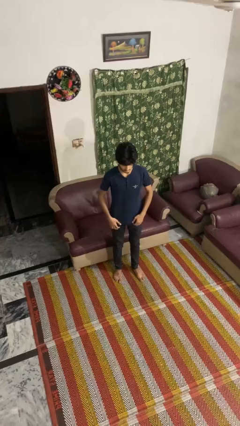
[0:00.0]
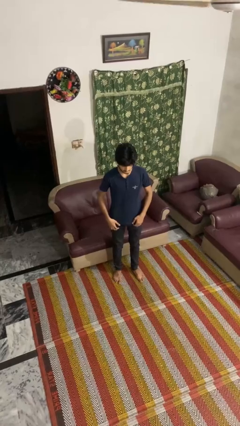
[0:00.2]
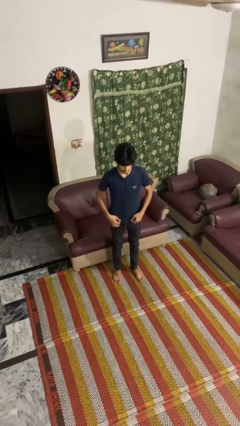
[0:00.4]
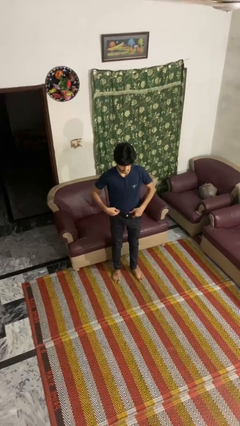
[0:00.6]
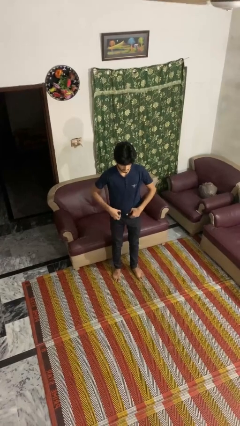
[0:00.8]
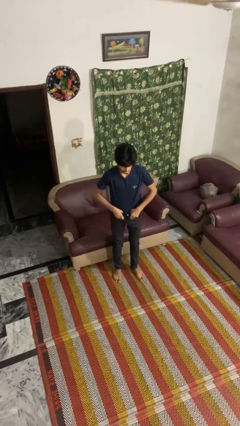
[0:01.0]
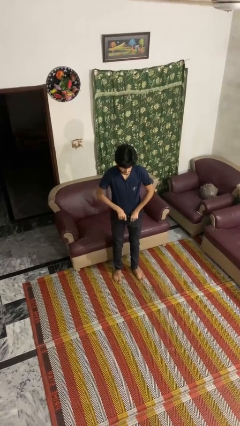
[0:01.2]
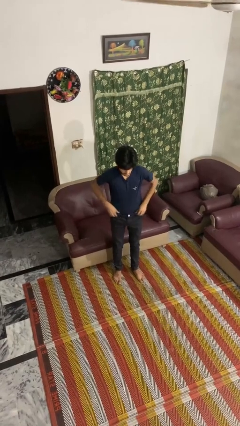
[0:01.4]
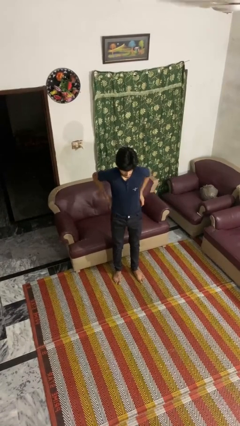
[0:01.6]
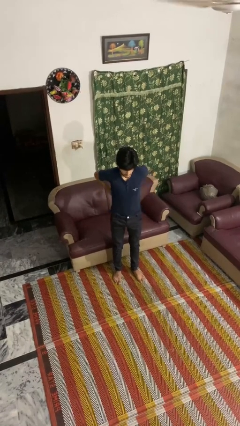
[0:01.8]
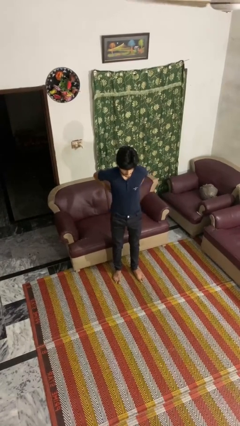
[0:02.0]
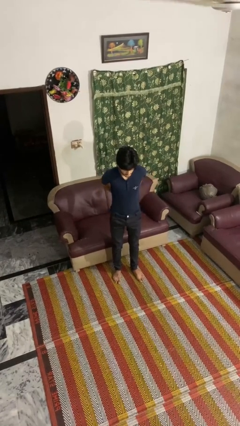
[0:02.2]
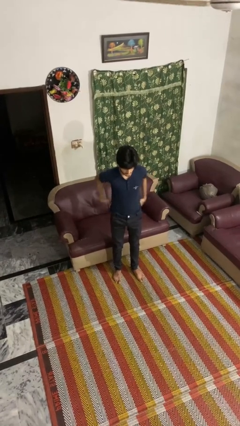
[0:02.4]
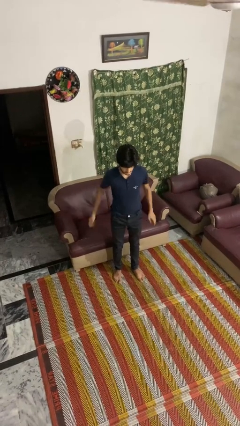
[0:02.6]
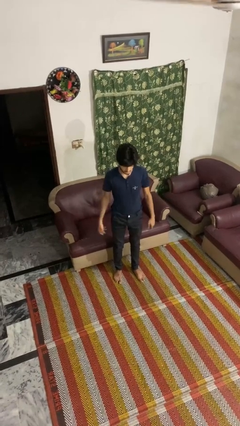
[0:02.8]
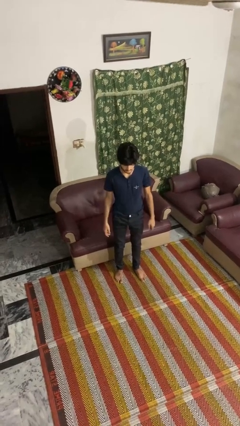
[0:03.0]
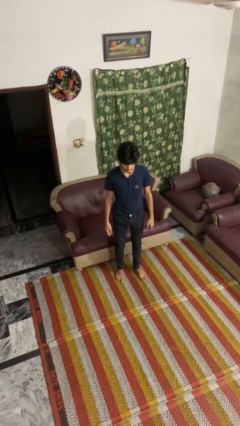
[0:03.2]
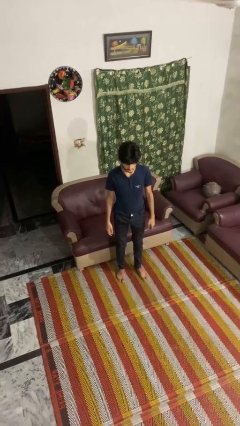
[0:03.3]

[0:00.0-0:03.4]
person tucks in shirt

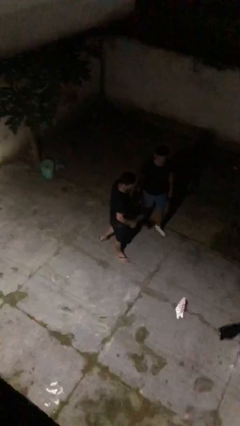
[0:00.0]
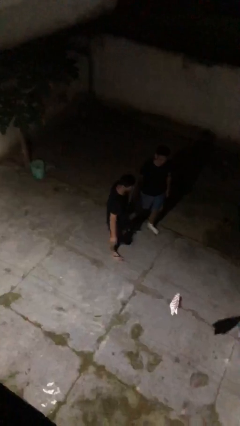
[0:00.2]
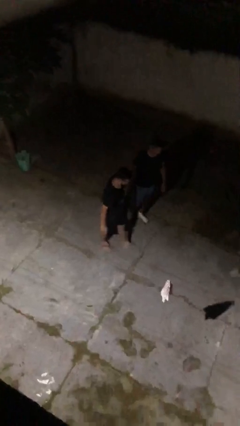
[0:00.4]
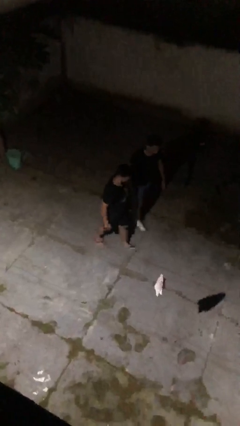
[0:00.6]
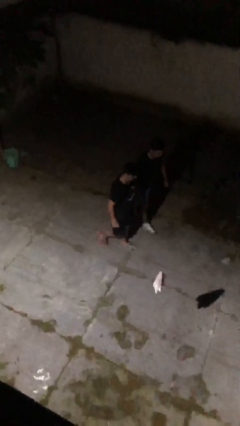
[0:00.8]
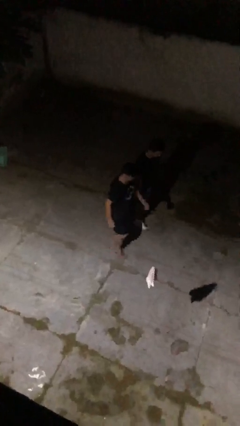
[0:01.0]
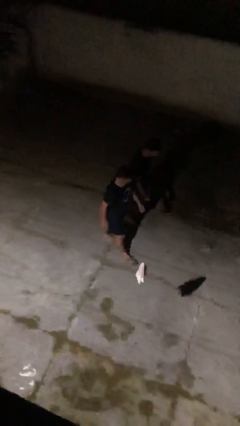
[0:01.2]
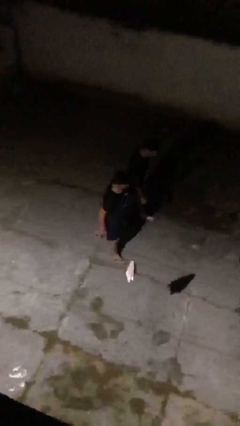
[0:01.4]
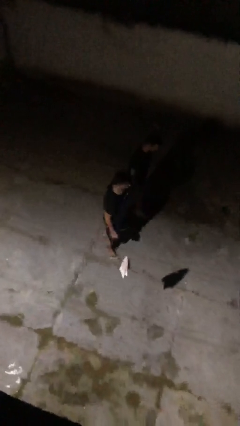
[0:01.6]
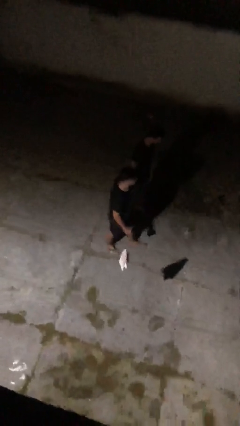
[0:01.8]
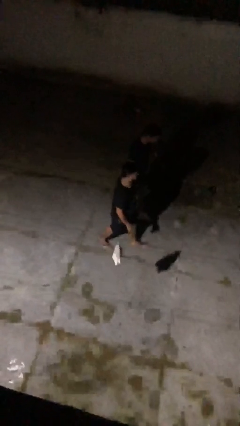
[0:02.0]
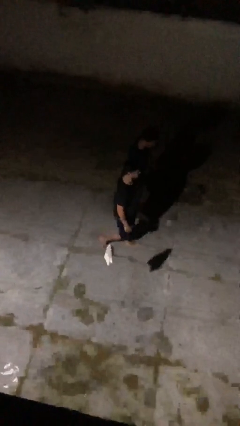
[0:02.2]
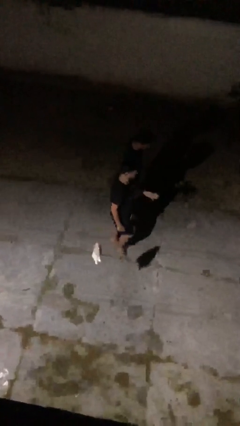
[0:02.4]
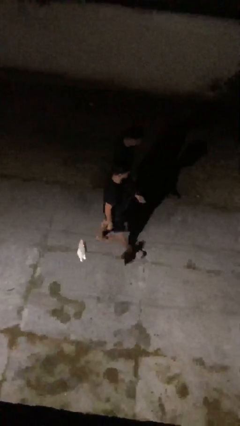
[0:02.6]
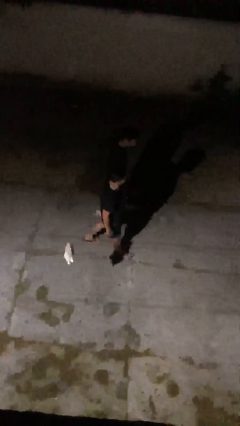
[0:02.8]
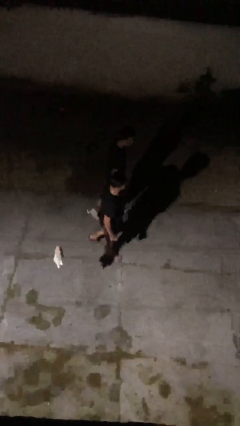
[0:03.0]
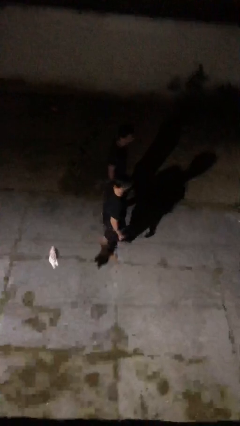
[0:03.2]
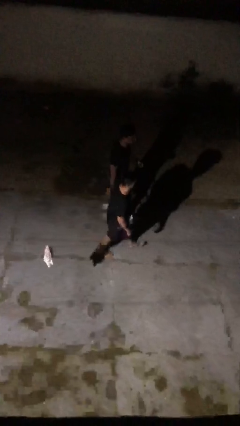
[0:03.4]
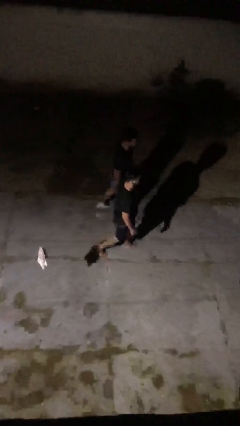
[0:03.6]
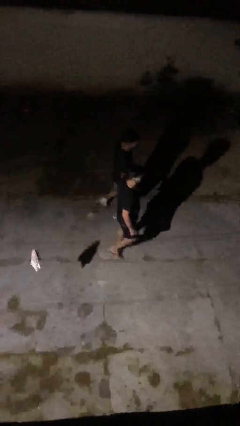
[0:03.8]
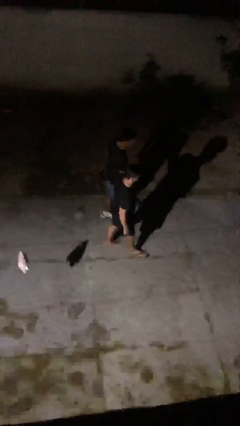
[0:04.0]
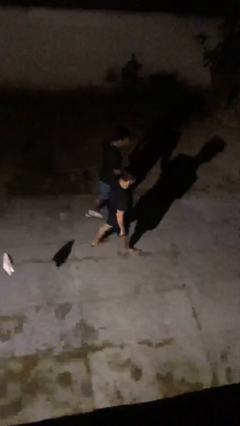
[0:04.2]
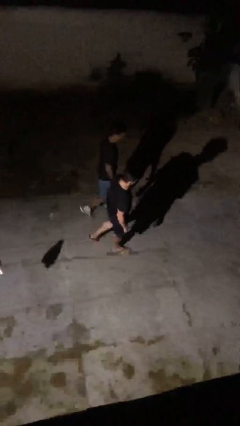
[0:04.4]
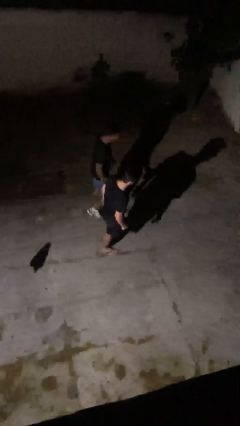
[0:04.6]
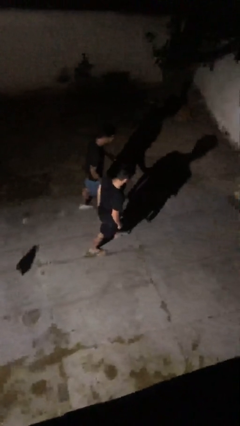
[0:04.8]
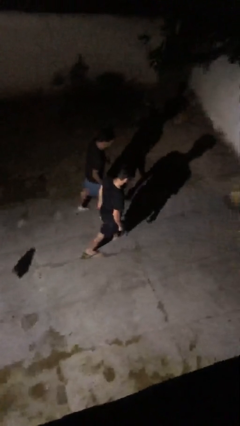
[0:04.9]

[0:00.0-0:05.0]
person talks to person

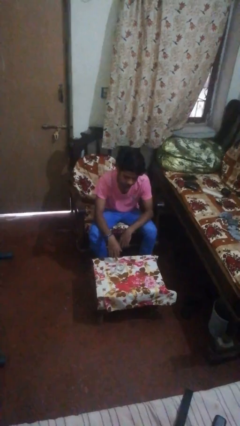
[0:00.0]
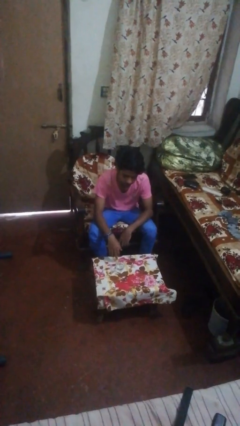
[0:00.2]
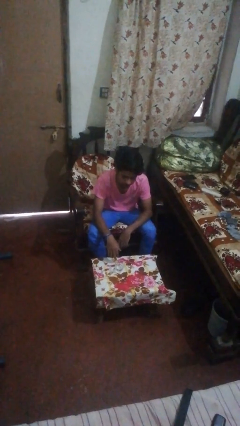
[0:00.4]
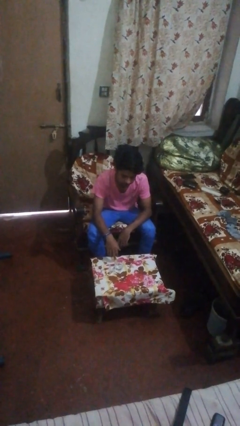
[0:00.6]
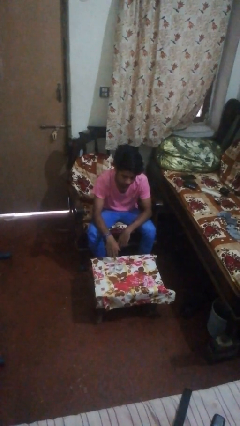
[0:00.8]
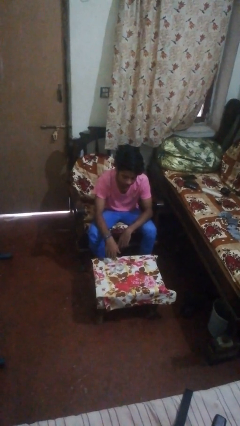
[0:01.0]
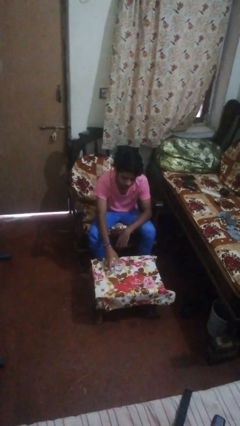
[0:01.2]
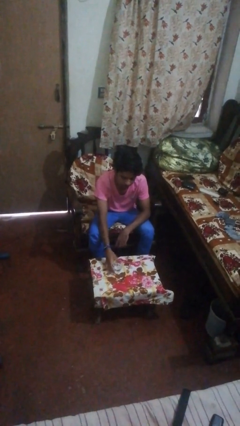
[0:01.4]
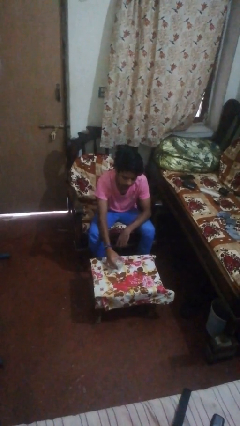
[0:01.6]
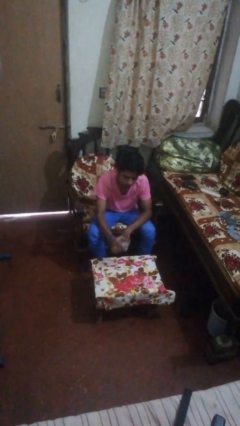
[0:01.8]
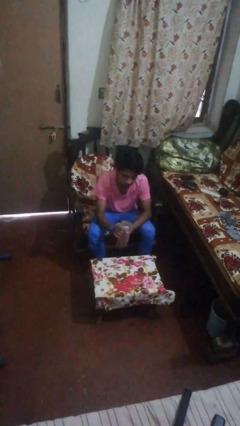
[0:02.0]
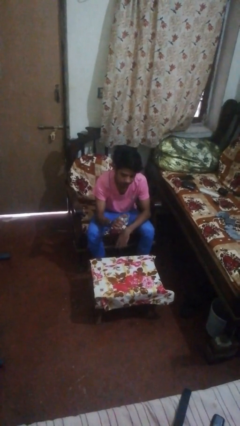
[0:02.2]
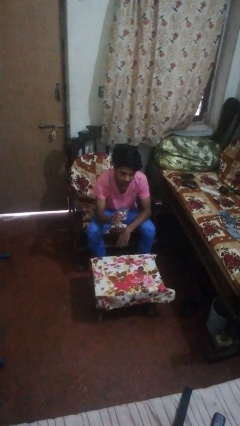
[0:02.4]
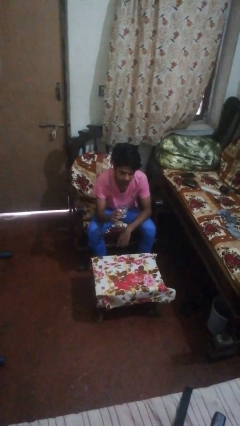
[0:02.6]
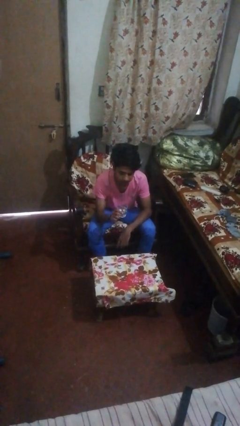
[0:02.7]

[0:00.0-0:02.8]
person picks up object from table

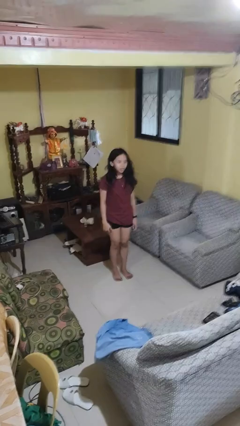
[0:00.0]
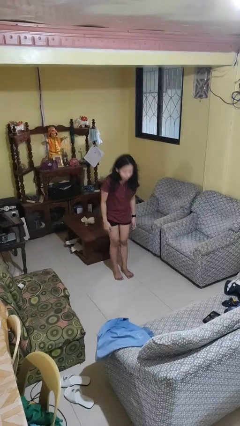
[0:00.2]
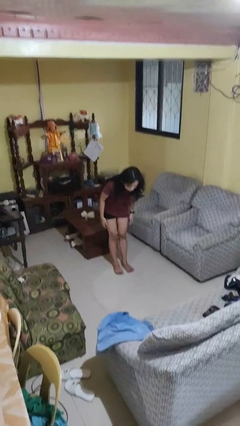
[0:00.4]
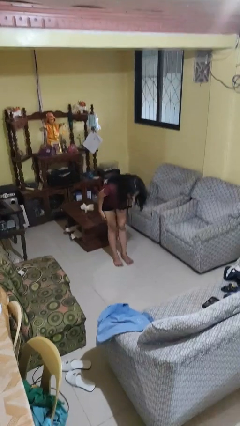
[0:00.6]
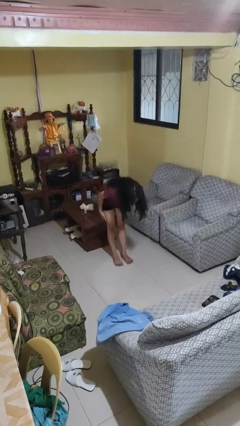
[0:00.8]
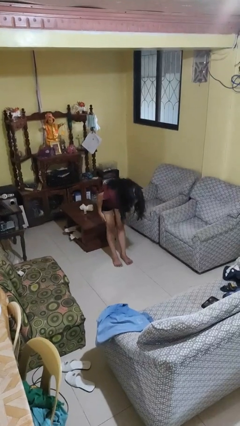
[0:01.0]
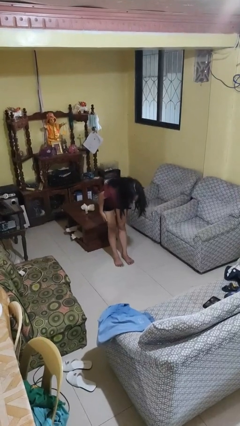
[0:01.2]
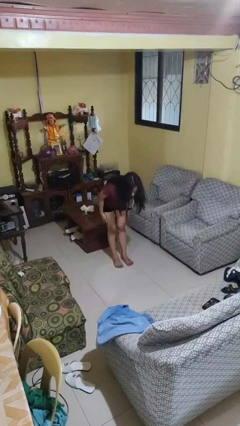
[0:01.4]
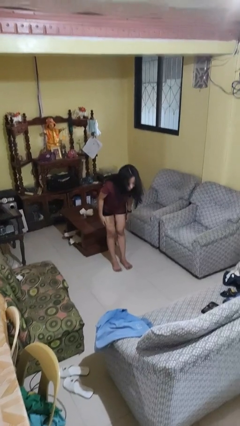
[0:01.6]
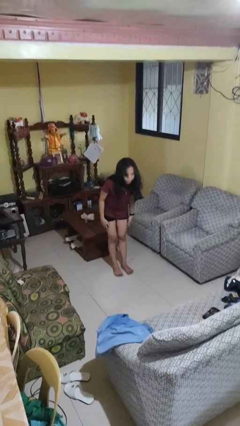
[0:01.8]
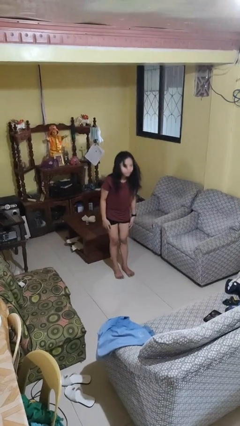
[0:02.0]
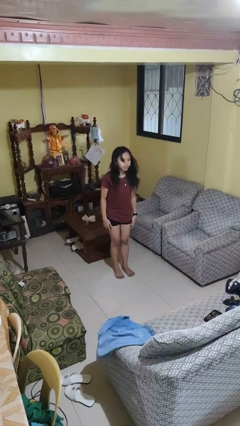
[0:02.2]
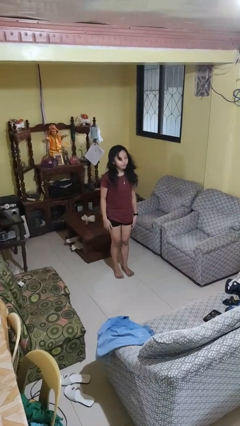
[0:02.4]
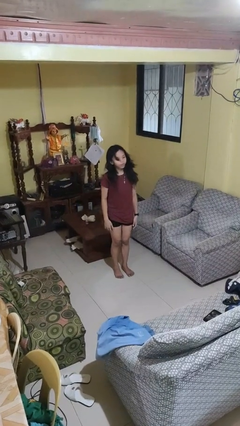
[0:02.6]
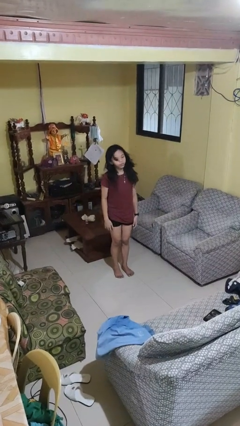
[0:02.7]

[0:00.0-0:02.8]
person bows

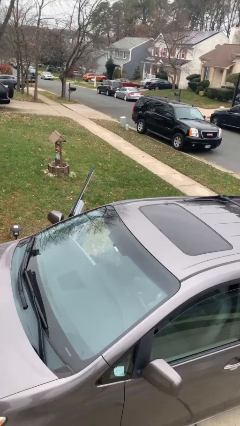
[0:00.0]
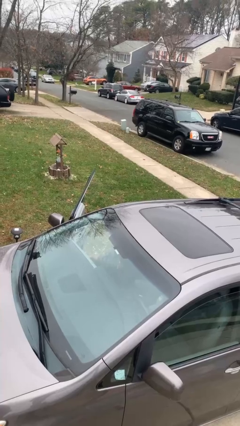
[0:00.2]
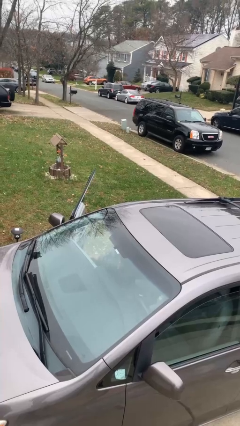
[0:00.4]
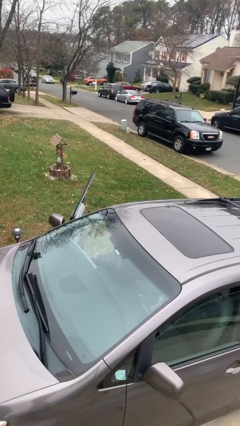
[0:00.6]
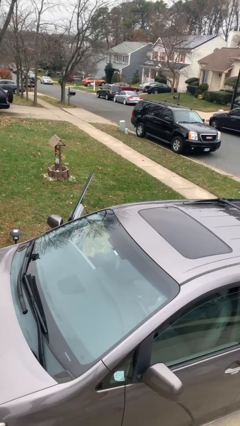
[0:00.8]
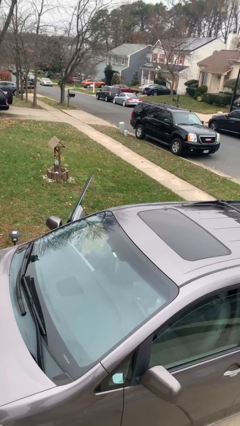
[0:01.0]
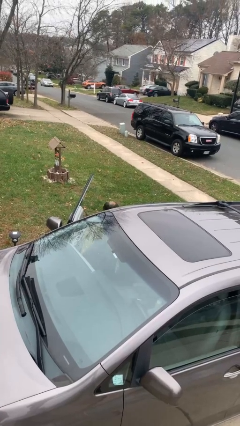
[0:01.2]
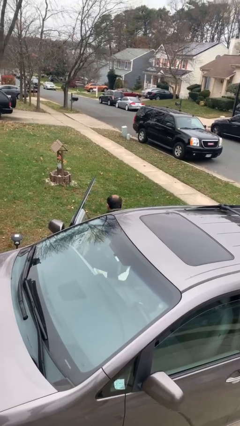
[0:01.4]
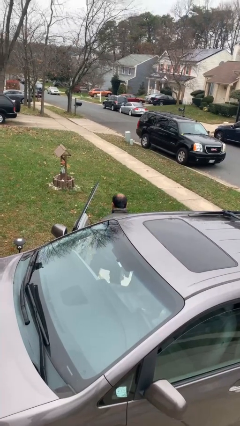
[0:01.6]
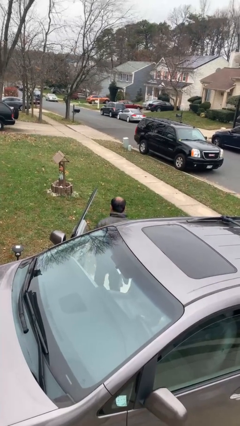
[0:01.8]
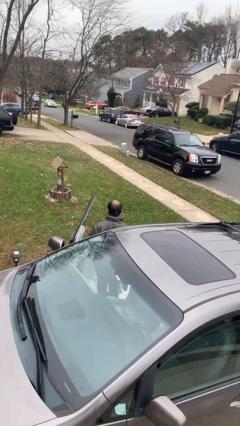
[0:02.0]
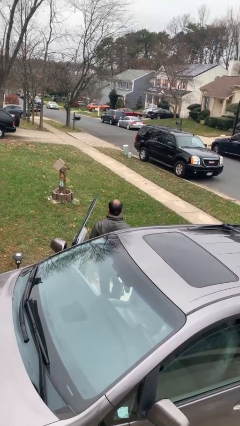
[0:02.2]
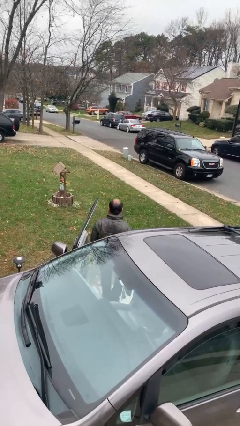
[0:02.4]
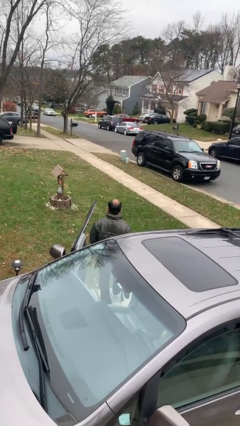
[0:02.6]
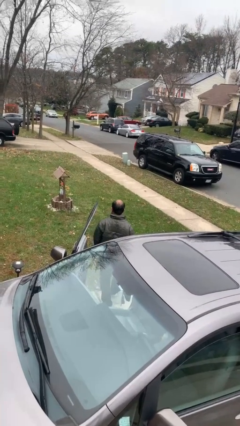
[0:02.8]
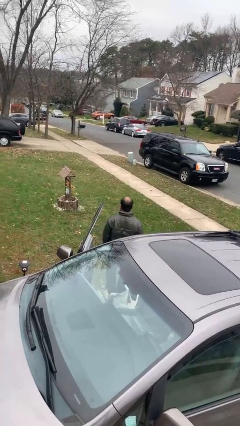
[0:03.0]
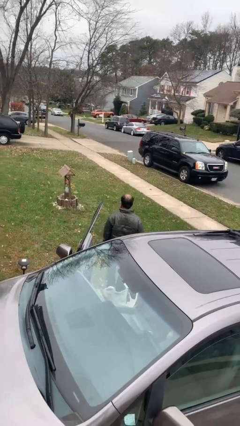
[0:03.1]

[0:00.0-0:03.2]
person exits car
